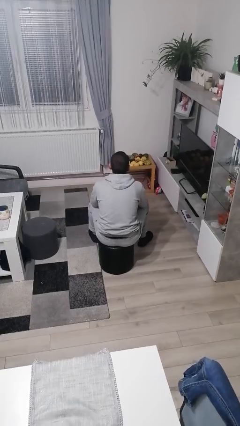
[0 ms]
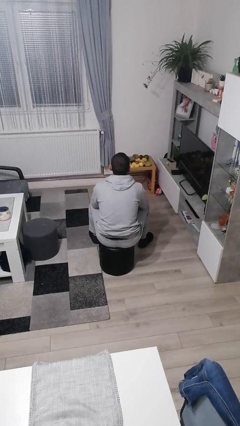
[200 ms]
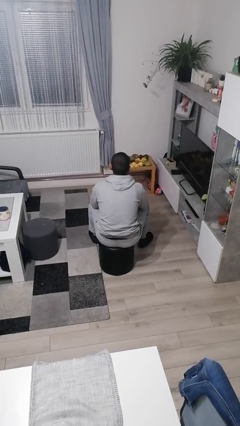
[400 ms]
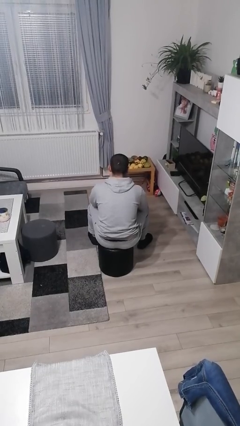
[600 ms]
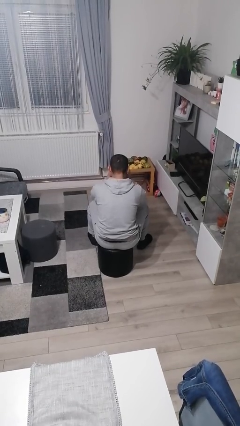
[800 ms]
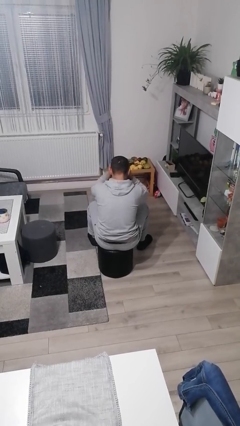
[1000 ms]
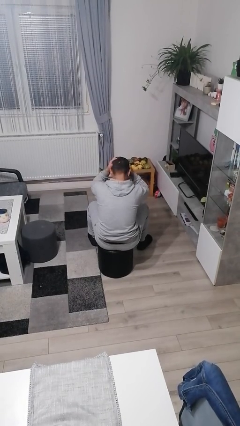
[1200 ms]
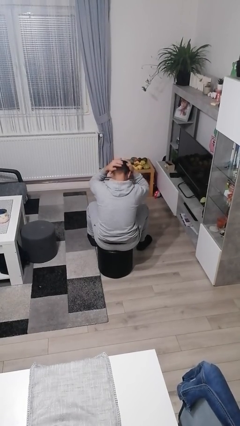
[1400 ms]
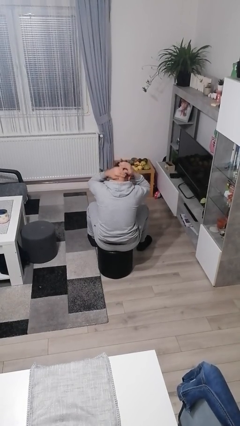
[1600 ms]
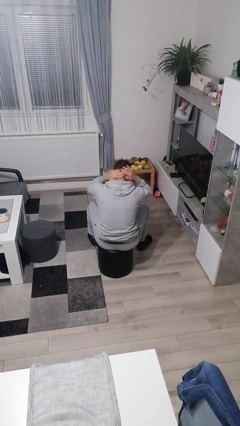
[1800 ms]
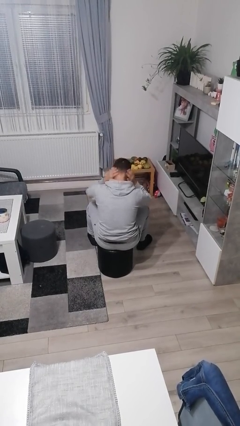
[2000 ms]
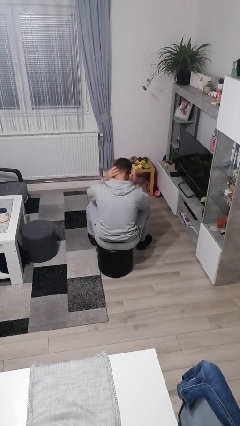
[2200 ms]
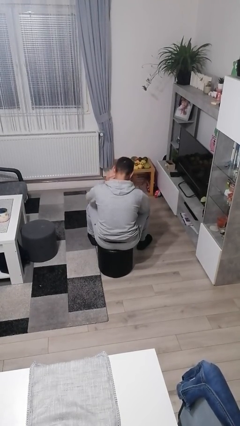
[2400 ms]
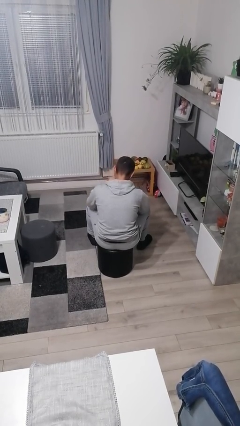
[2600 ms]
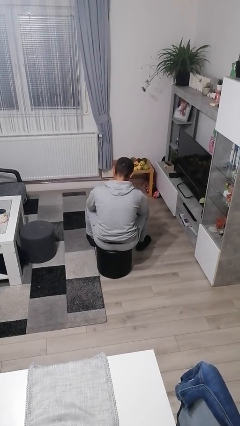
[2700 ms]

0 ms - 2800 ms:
person strokes hair

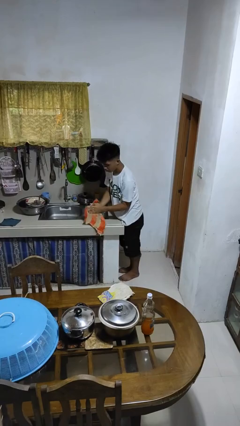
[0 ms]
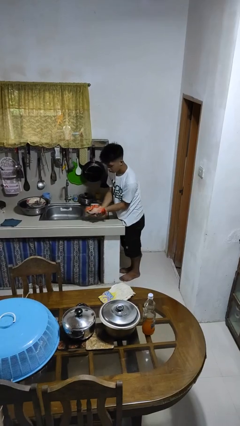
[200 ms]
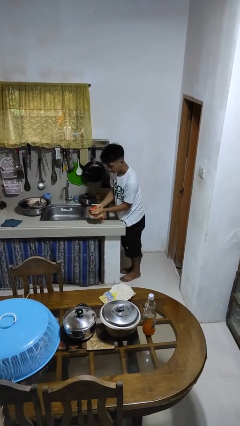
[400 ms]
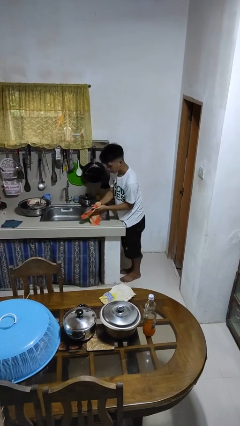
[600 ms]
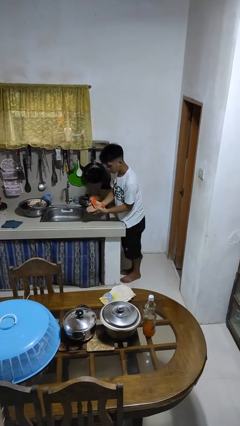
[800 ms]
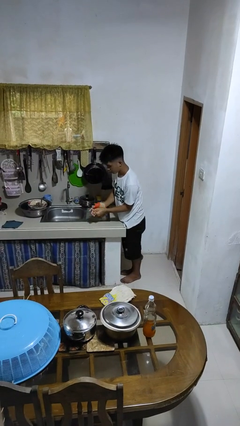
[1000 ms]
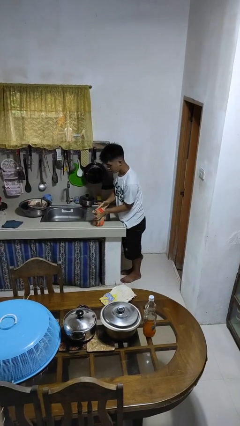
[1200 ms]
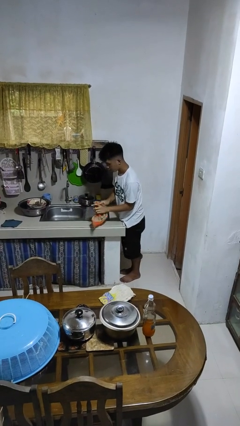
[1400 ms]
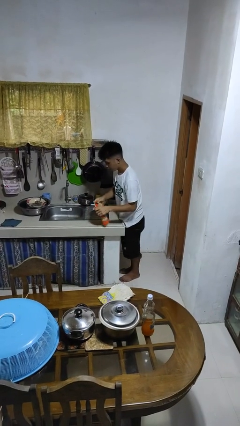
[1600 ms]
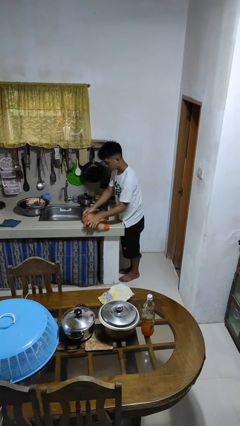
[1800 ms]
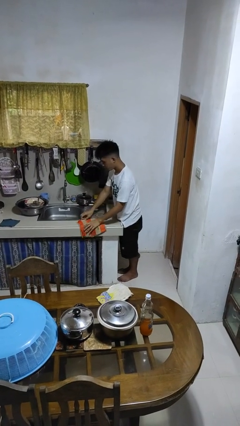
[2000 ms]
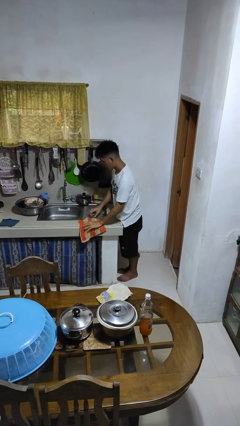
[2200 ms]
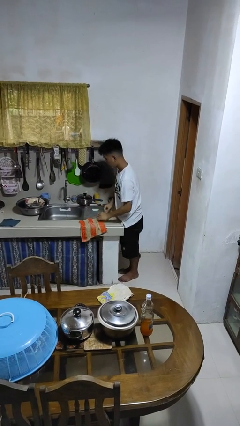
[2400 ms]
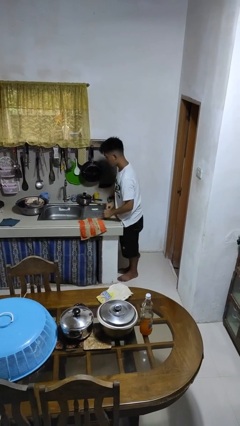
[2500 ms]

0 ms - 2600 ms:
person dries hands with towel

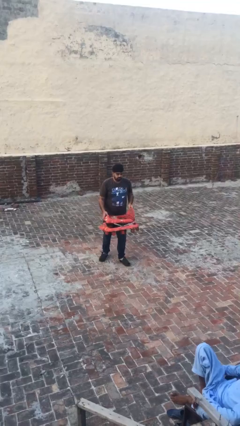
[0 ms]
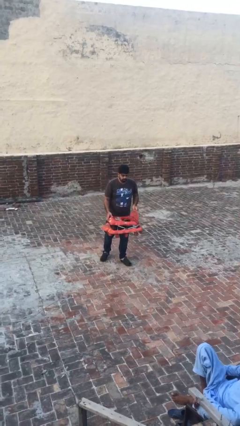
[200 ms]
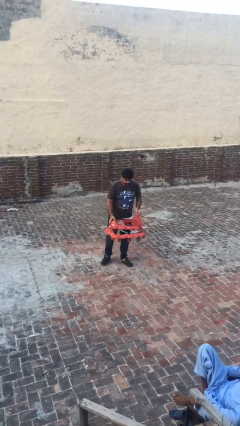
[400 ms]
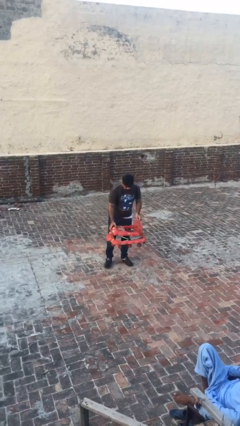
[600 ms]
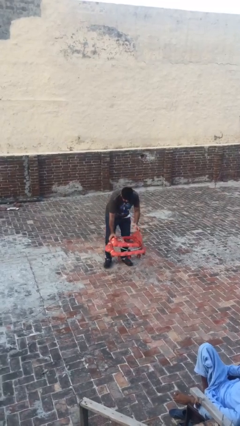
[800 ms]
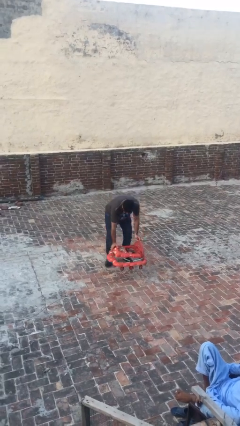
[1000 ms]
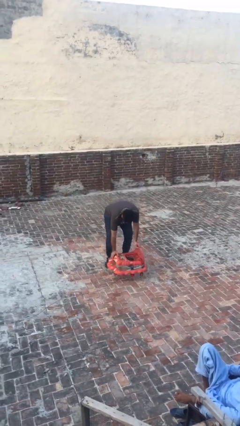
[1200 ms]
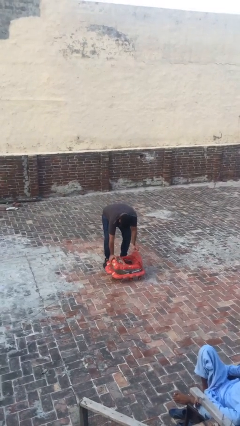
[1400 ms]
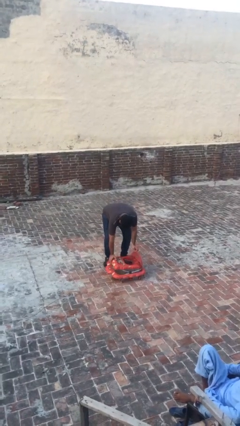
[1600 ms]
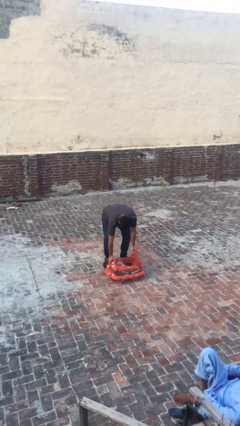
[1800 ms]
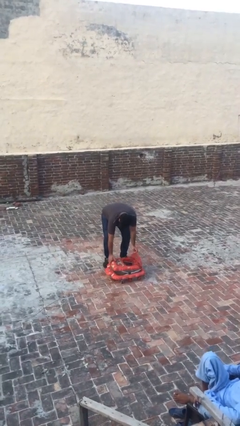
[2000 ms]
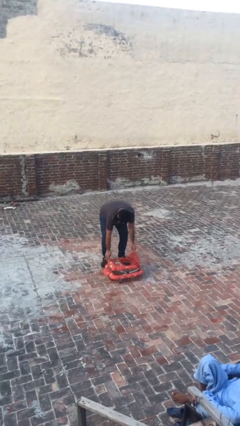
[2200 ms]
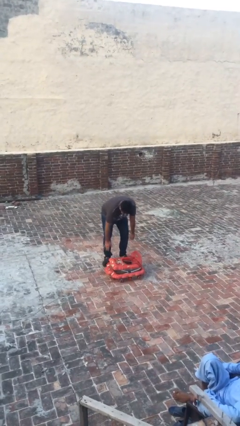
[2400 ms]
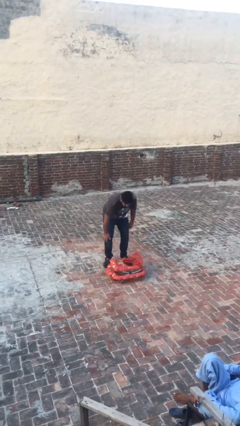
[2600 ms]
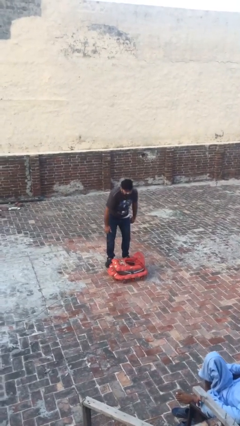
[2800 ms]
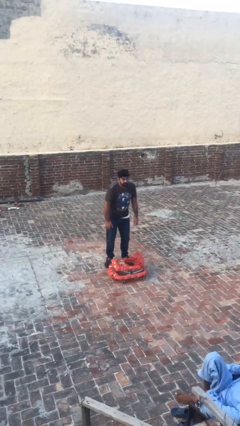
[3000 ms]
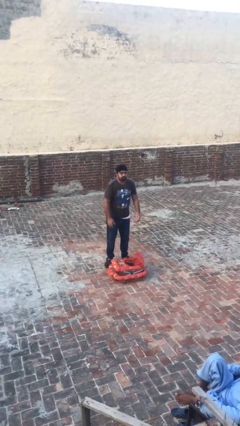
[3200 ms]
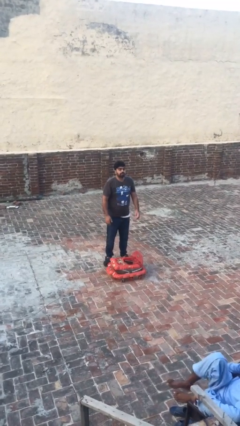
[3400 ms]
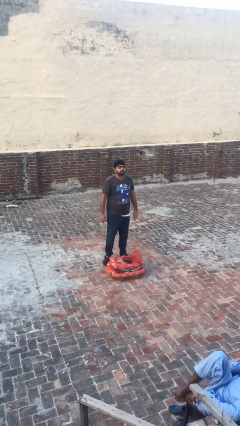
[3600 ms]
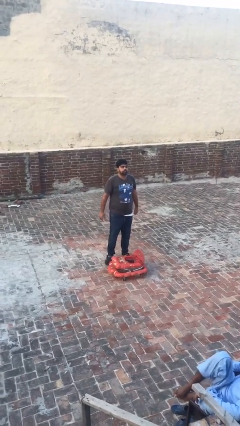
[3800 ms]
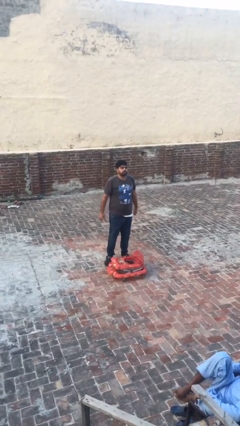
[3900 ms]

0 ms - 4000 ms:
person puts down object on floor

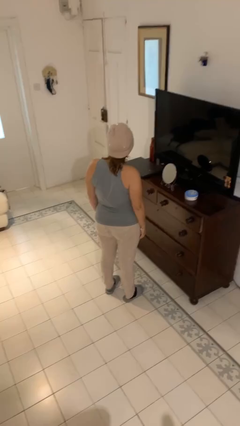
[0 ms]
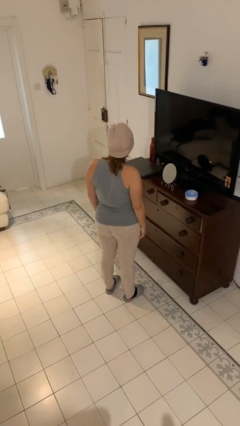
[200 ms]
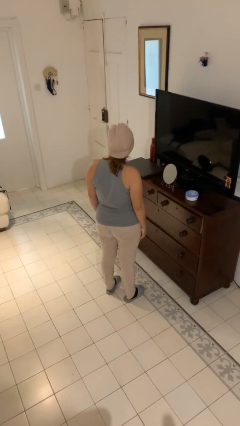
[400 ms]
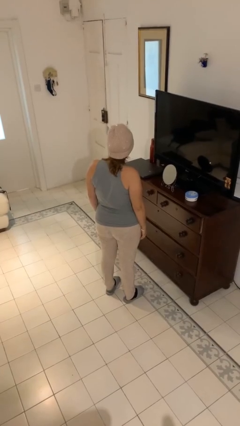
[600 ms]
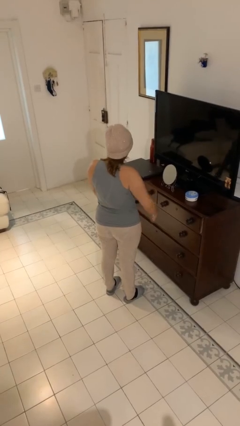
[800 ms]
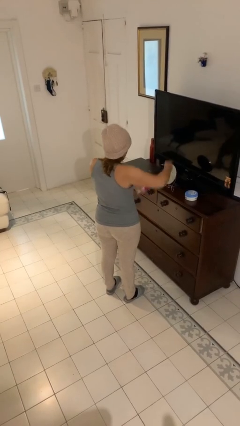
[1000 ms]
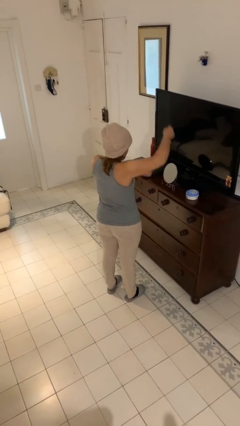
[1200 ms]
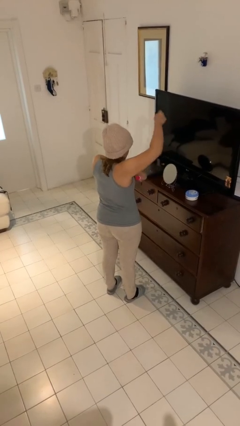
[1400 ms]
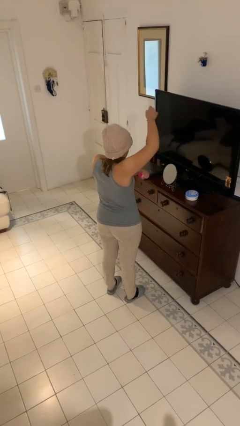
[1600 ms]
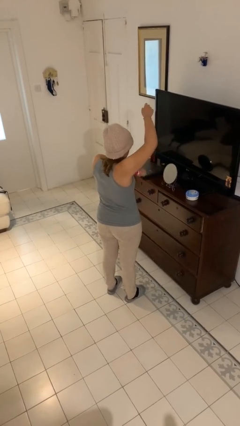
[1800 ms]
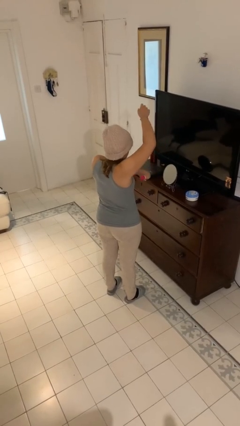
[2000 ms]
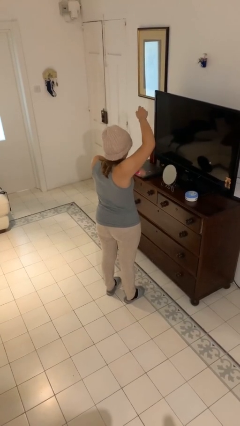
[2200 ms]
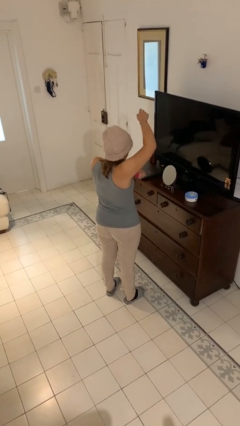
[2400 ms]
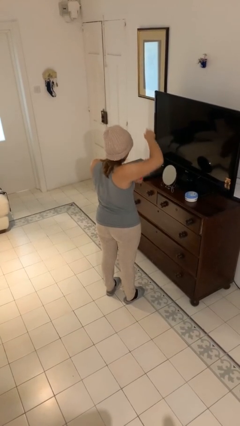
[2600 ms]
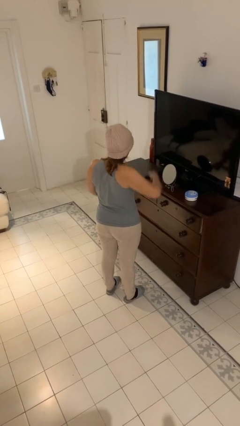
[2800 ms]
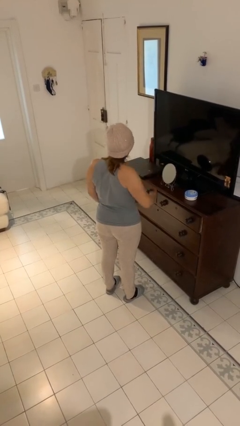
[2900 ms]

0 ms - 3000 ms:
person applies deodorant

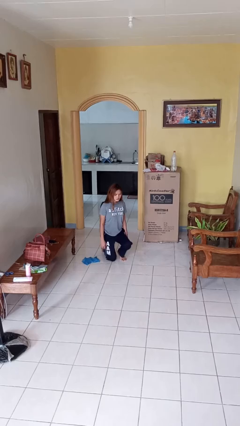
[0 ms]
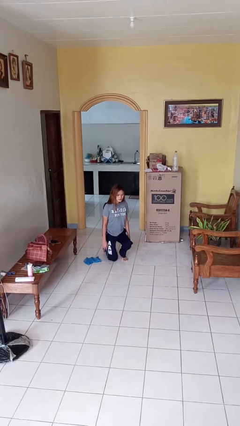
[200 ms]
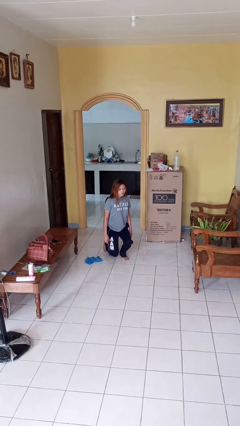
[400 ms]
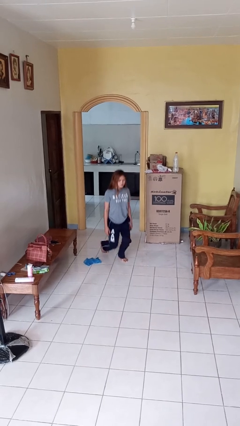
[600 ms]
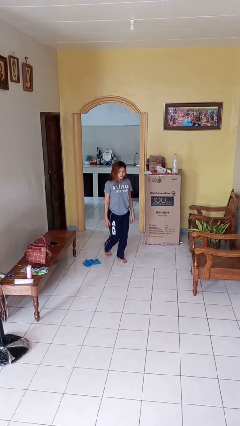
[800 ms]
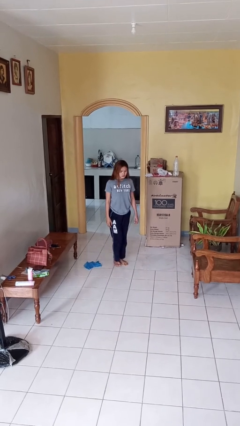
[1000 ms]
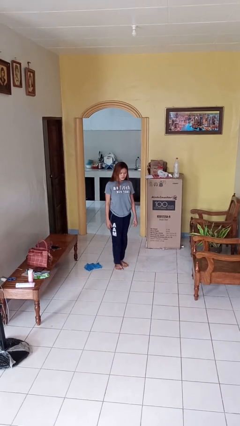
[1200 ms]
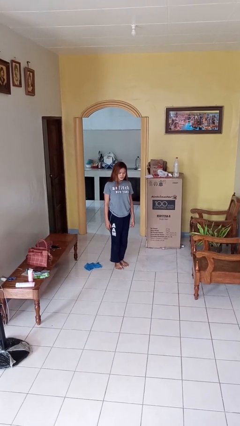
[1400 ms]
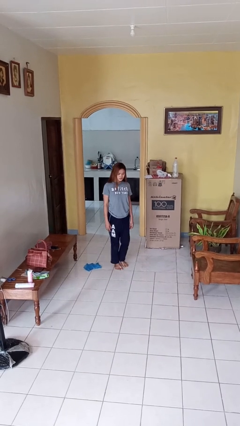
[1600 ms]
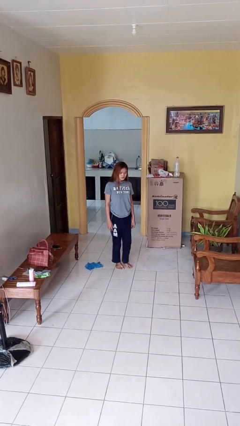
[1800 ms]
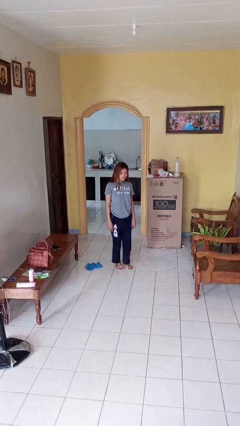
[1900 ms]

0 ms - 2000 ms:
person stands up from floor

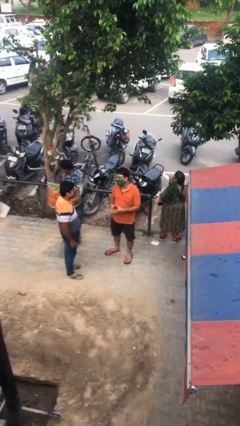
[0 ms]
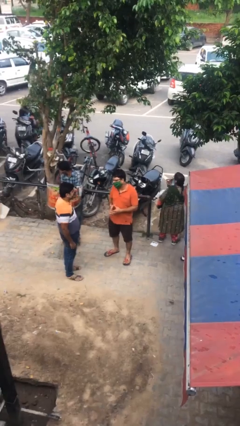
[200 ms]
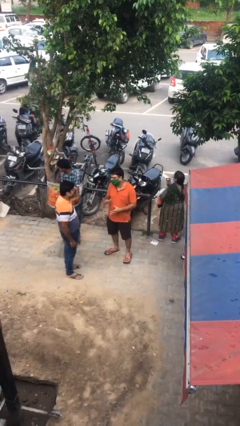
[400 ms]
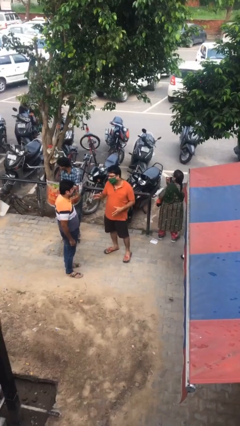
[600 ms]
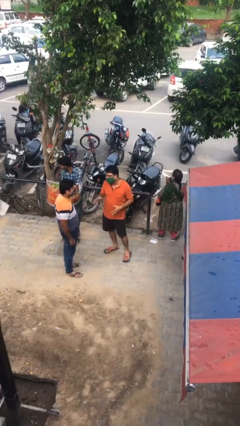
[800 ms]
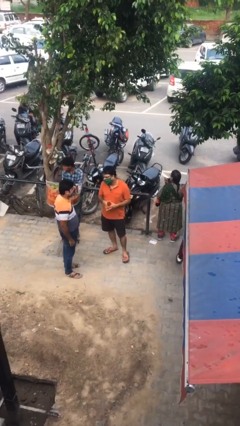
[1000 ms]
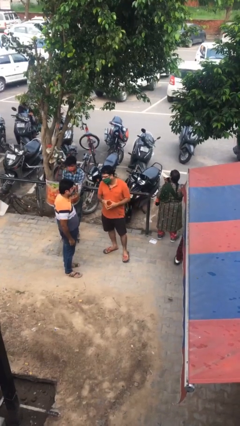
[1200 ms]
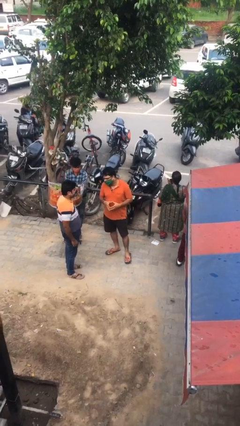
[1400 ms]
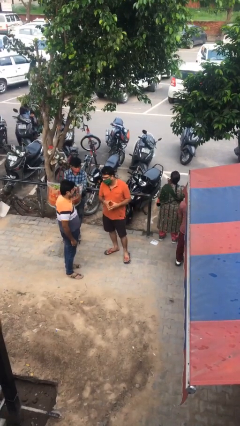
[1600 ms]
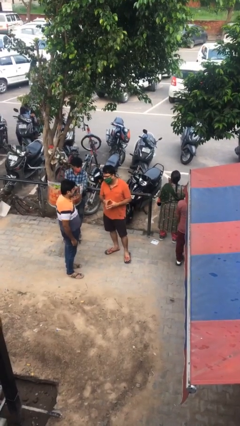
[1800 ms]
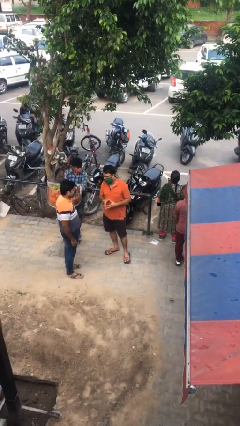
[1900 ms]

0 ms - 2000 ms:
person talks to person

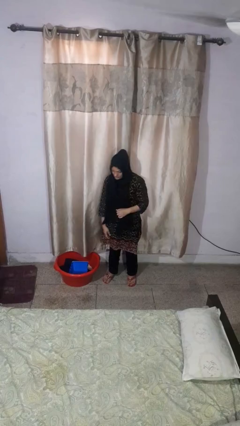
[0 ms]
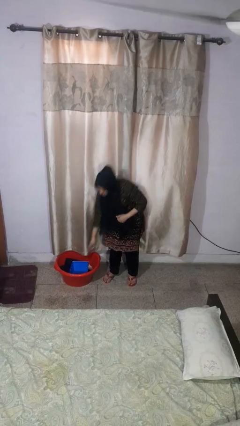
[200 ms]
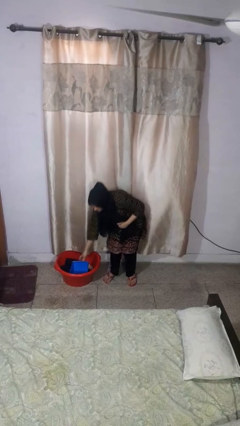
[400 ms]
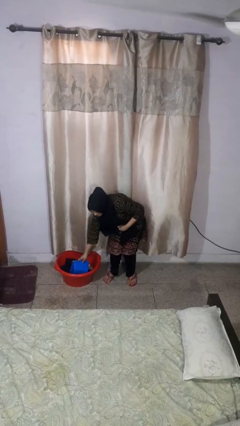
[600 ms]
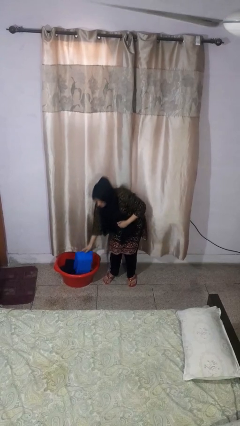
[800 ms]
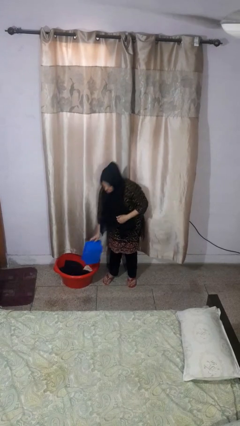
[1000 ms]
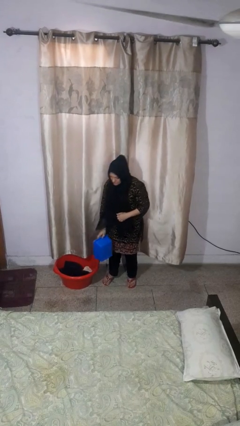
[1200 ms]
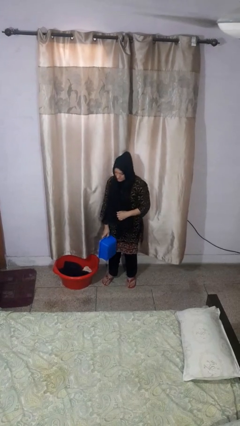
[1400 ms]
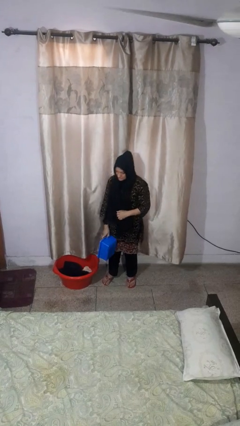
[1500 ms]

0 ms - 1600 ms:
person takes object from basket
